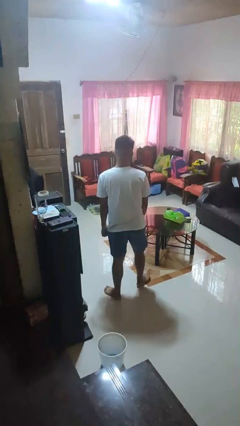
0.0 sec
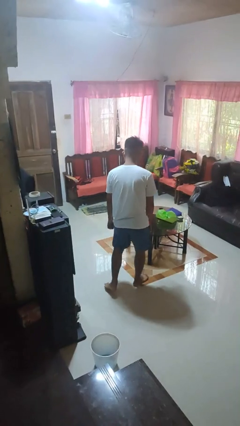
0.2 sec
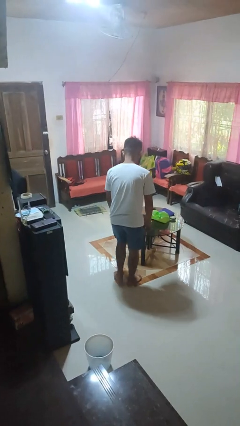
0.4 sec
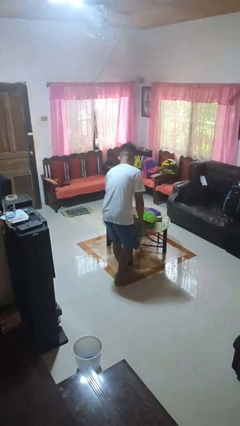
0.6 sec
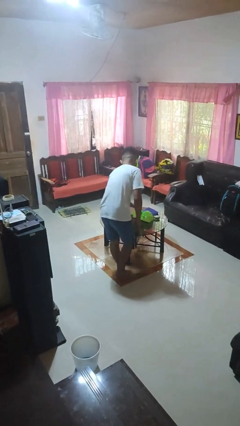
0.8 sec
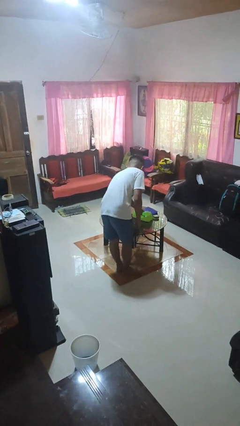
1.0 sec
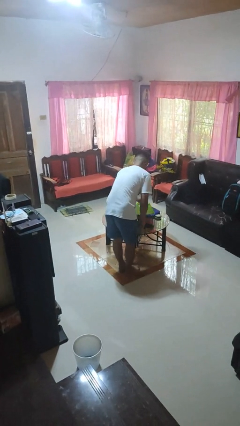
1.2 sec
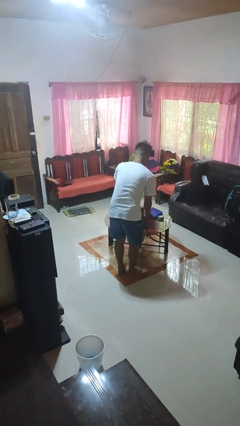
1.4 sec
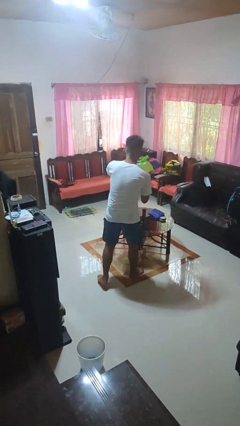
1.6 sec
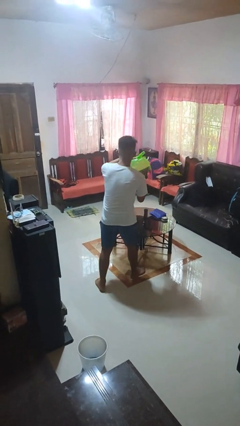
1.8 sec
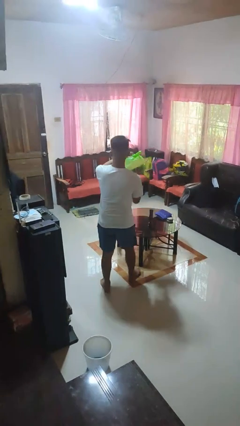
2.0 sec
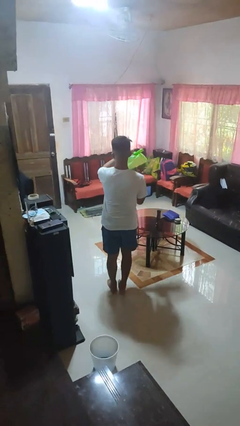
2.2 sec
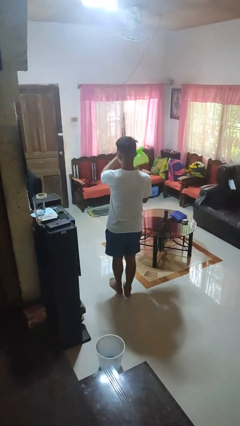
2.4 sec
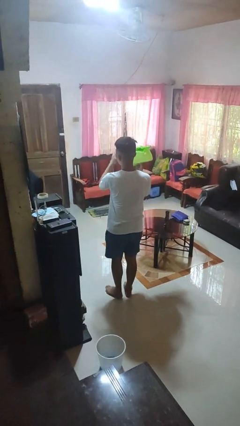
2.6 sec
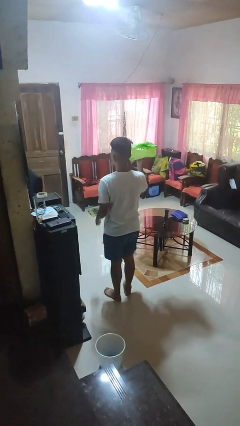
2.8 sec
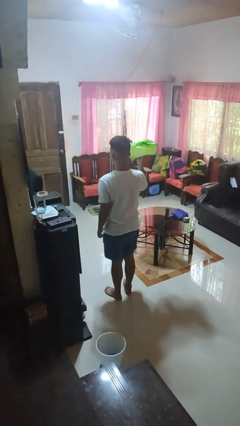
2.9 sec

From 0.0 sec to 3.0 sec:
person picks up object from table

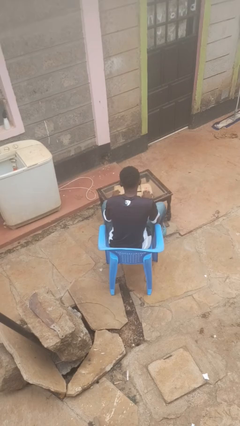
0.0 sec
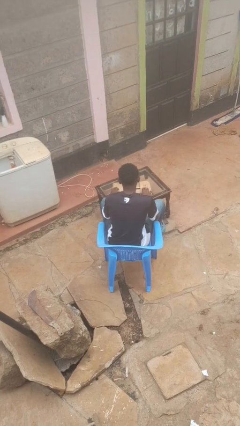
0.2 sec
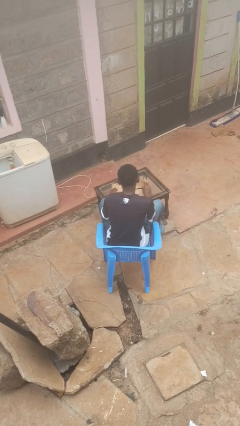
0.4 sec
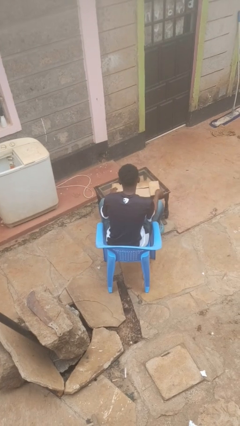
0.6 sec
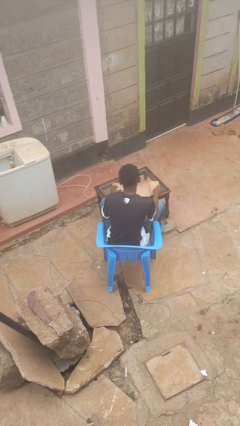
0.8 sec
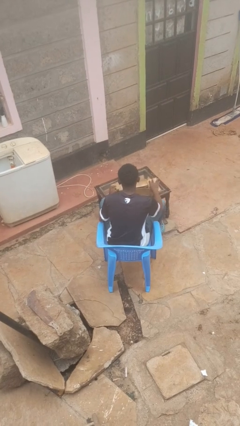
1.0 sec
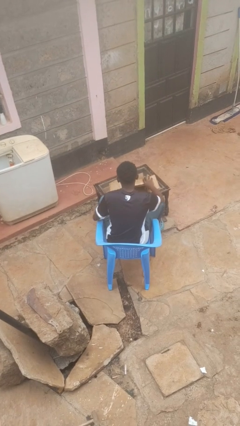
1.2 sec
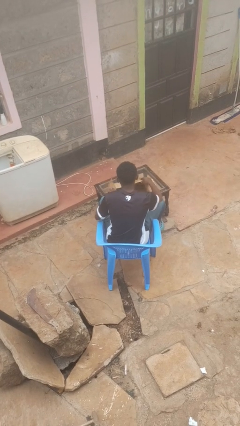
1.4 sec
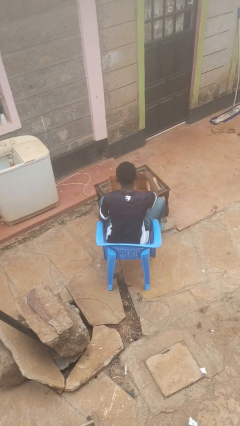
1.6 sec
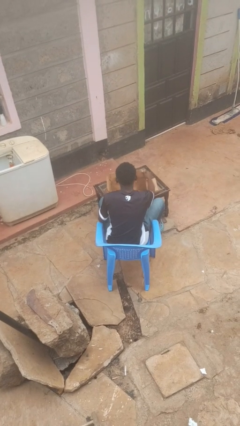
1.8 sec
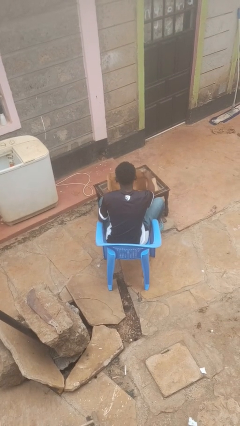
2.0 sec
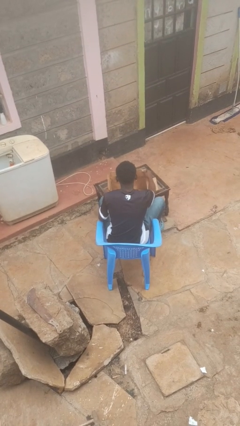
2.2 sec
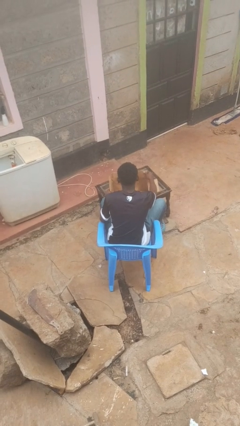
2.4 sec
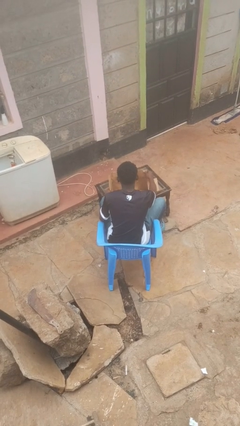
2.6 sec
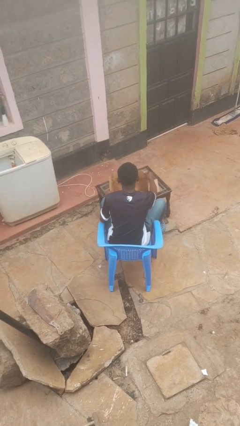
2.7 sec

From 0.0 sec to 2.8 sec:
person opens box

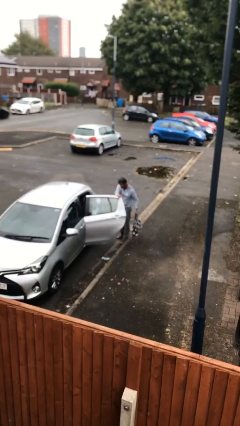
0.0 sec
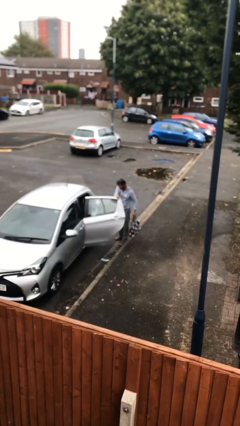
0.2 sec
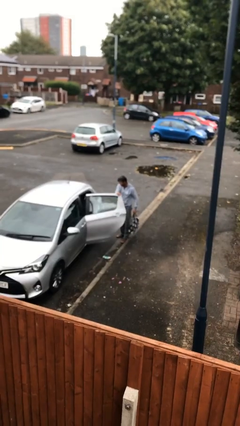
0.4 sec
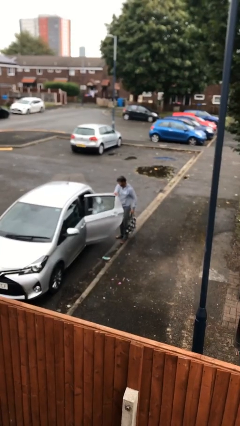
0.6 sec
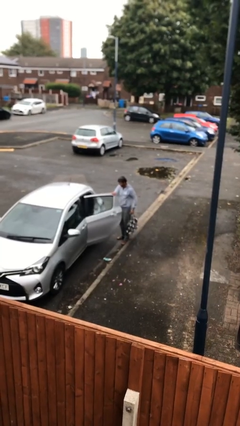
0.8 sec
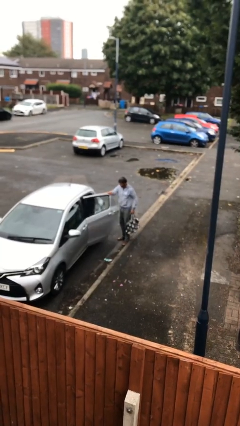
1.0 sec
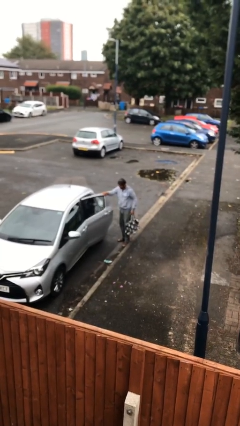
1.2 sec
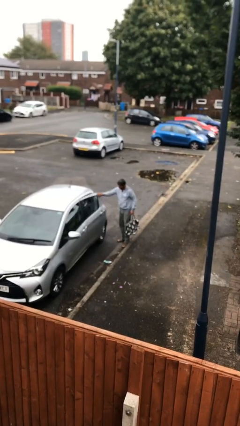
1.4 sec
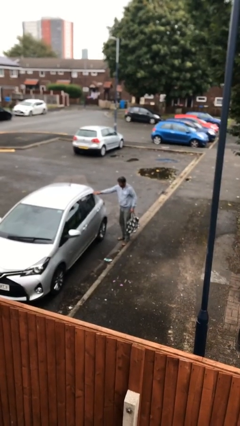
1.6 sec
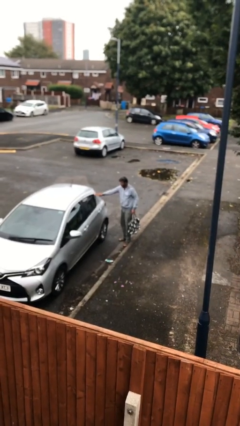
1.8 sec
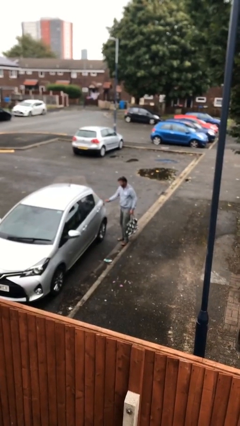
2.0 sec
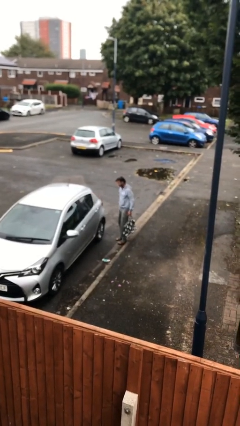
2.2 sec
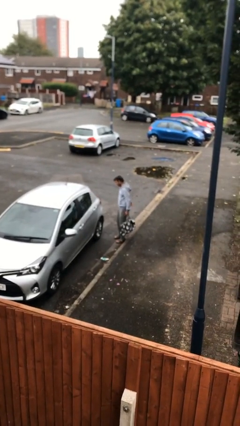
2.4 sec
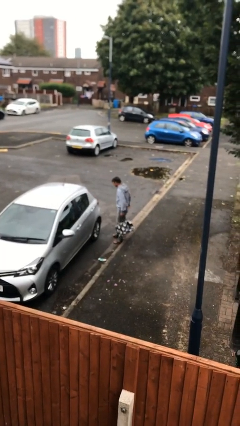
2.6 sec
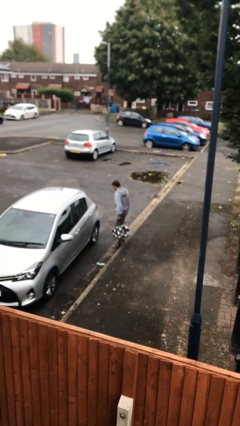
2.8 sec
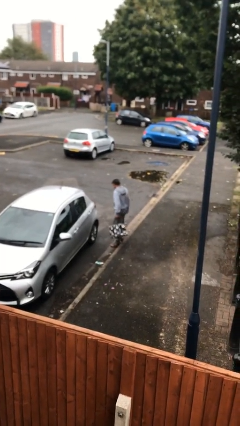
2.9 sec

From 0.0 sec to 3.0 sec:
person closes car door

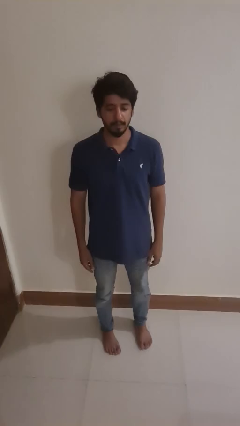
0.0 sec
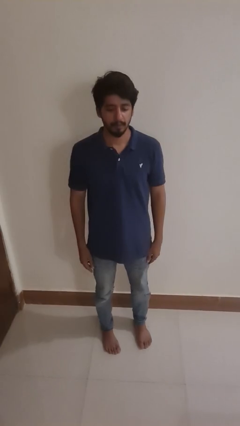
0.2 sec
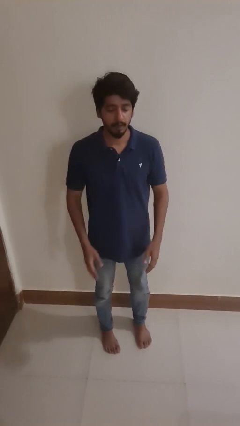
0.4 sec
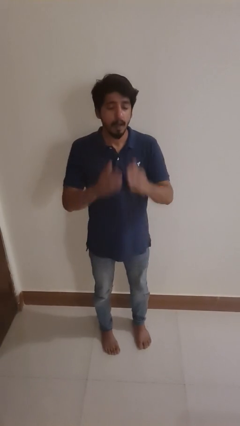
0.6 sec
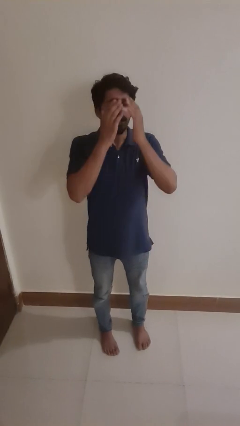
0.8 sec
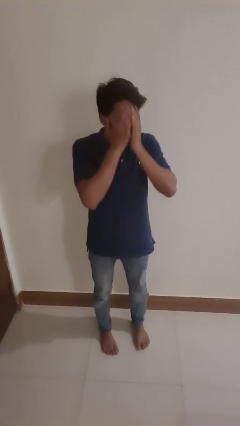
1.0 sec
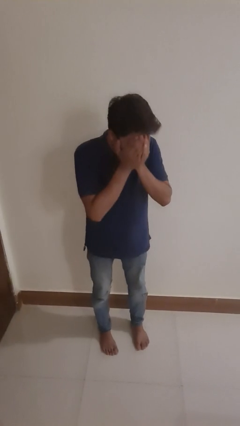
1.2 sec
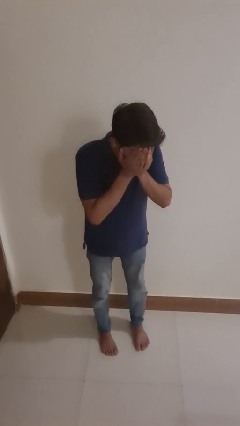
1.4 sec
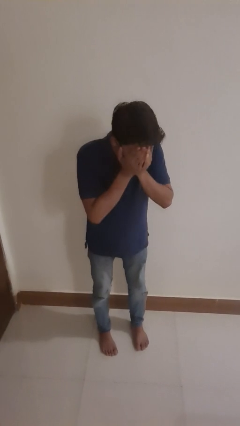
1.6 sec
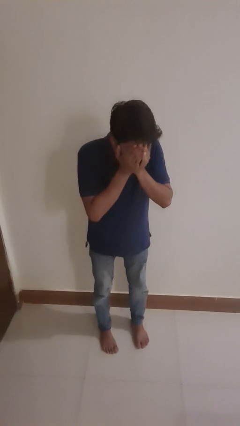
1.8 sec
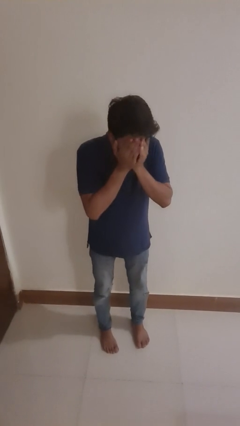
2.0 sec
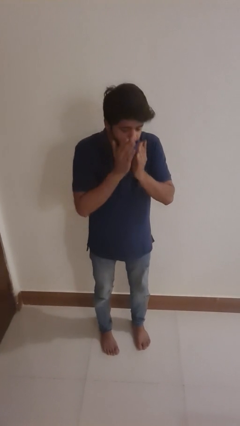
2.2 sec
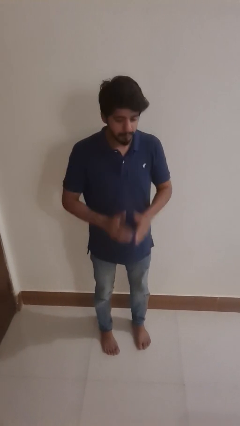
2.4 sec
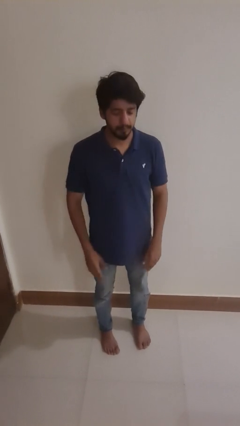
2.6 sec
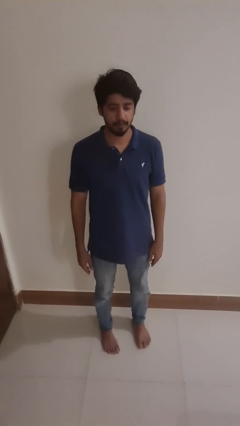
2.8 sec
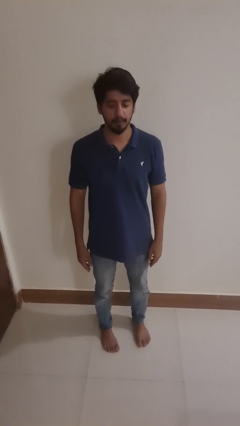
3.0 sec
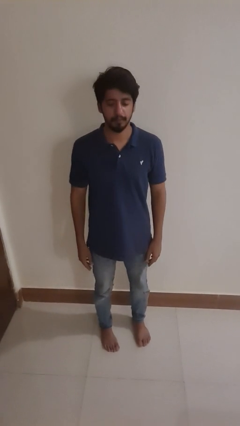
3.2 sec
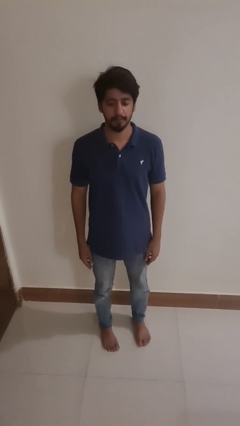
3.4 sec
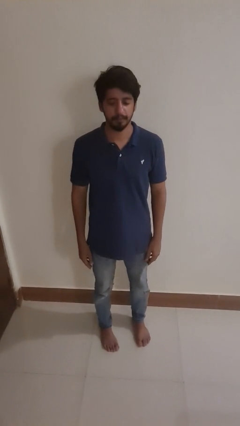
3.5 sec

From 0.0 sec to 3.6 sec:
person sneezes into hand

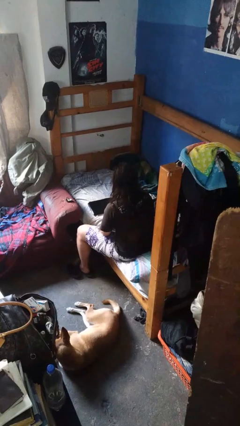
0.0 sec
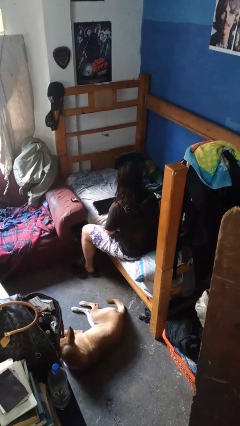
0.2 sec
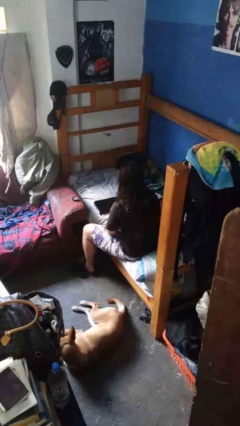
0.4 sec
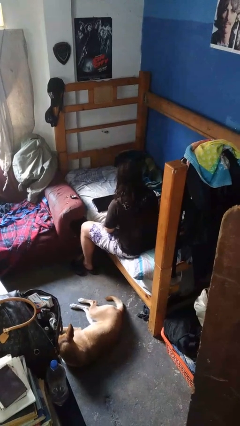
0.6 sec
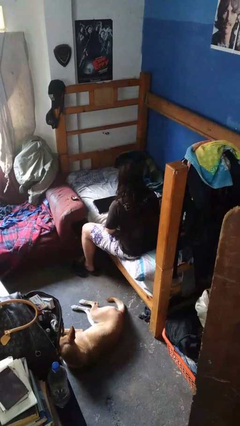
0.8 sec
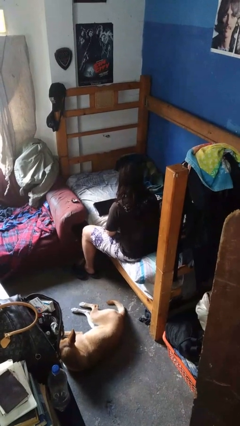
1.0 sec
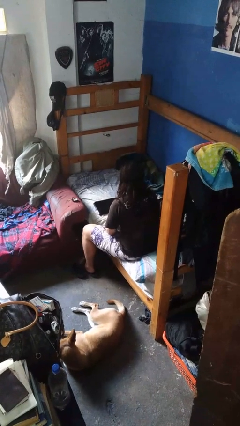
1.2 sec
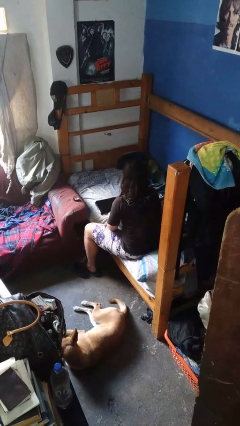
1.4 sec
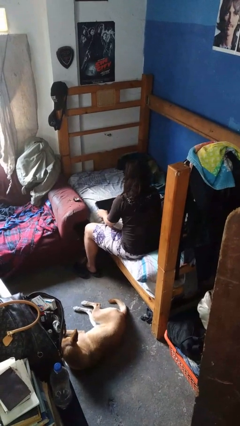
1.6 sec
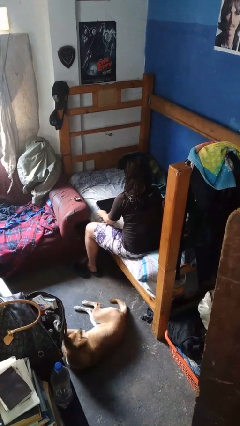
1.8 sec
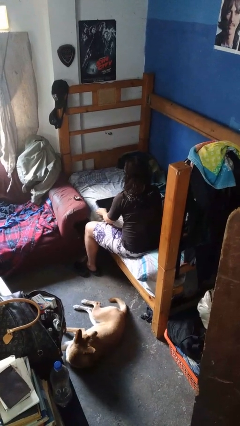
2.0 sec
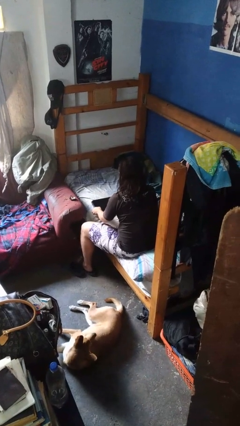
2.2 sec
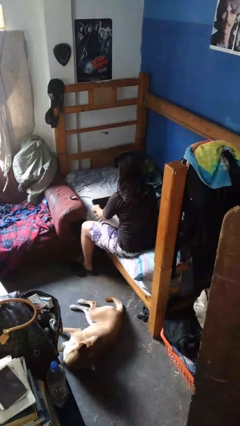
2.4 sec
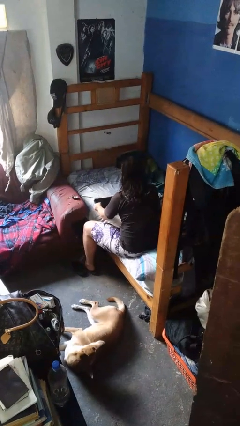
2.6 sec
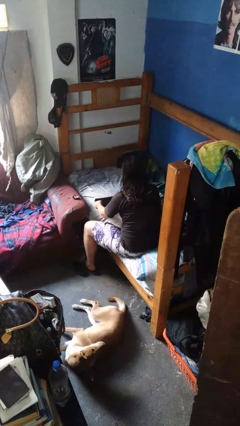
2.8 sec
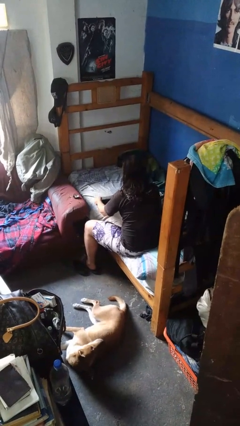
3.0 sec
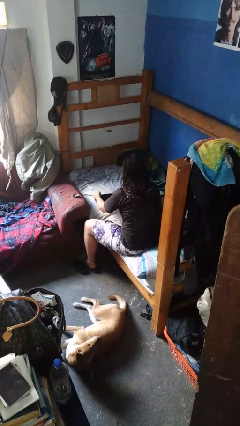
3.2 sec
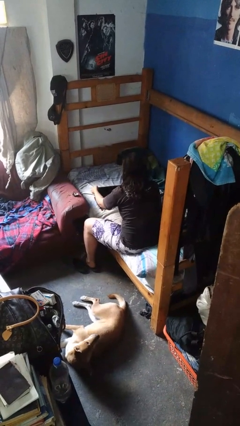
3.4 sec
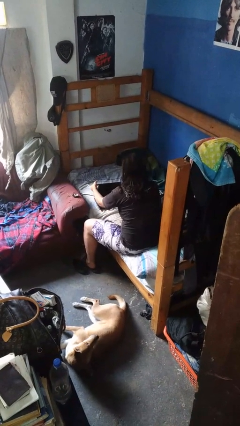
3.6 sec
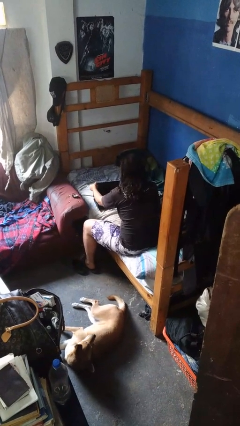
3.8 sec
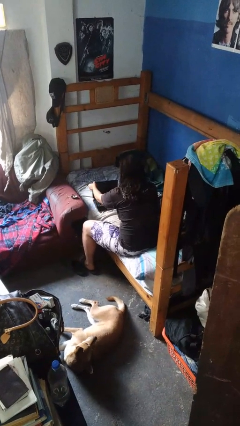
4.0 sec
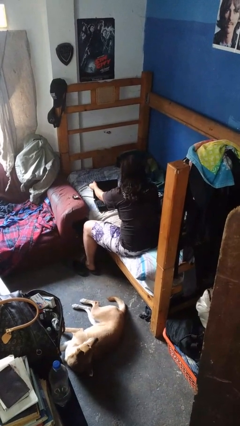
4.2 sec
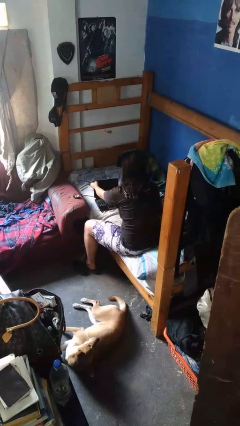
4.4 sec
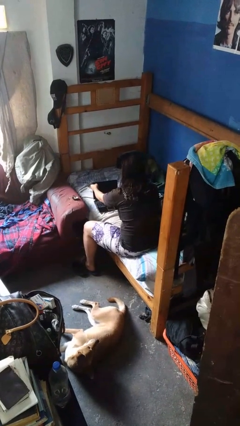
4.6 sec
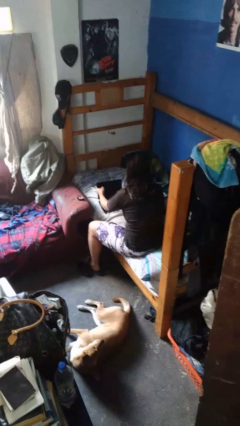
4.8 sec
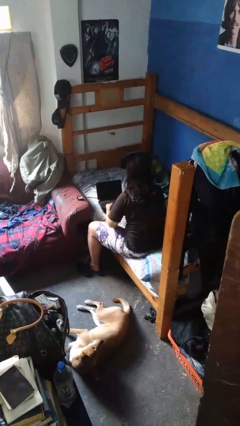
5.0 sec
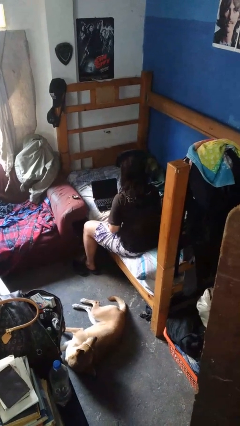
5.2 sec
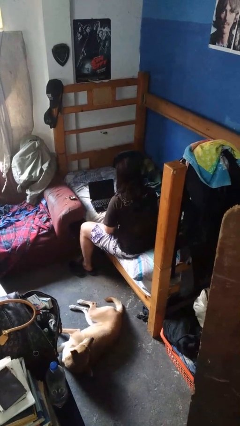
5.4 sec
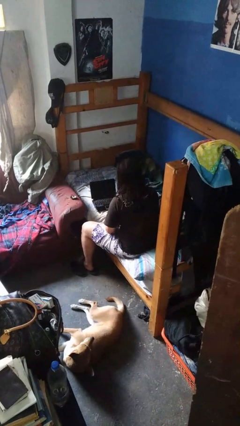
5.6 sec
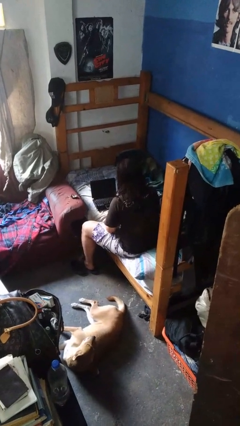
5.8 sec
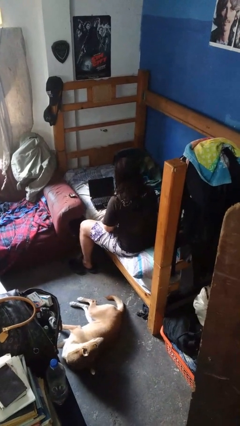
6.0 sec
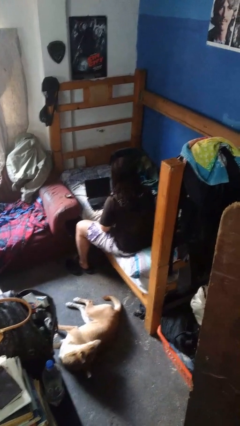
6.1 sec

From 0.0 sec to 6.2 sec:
person opens laptop
